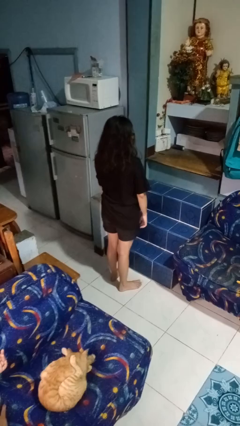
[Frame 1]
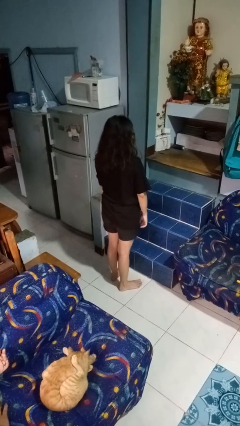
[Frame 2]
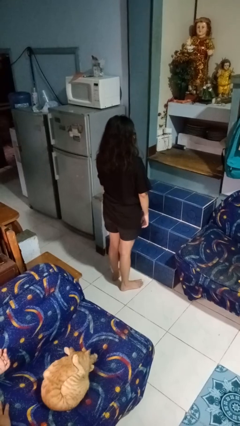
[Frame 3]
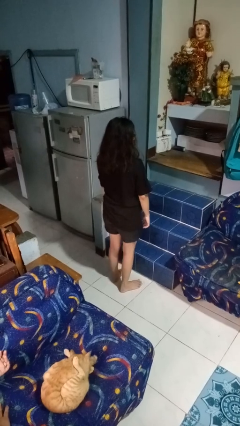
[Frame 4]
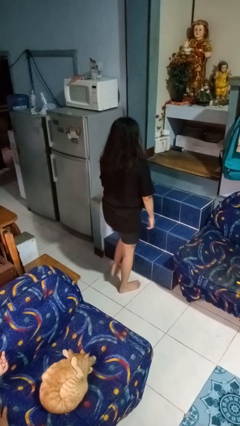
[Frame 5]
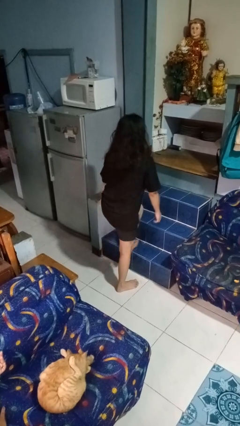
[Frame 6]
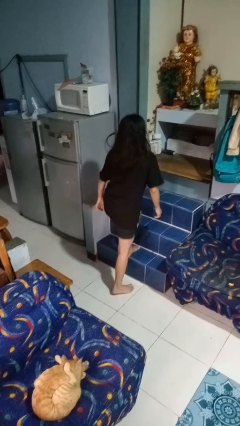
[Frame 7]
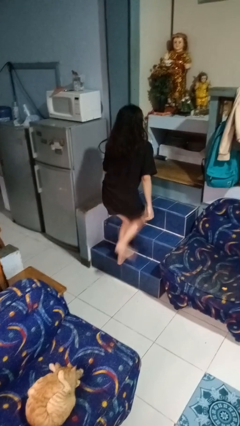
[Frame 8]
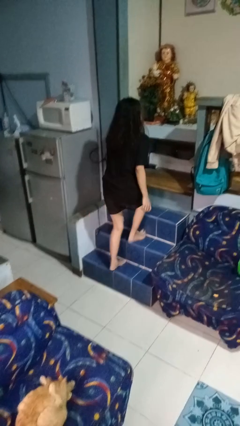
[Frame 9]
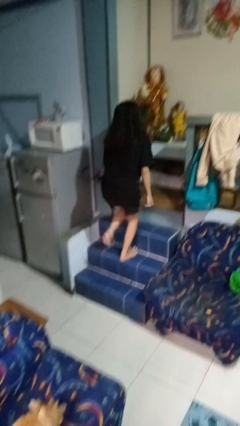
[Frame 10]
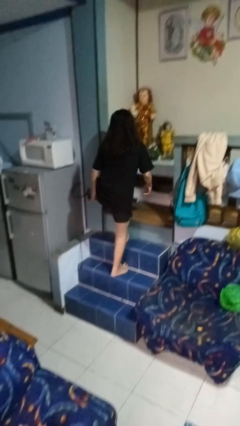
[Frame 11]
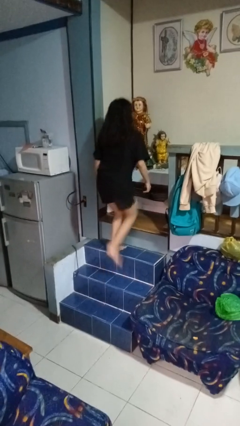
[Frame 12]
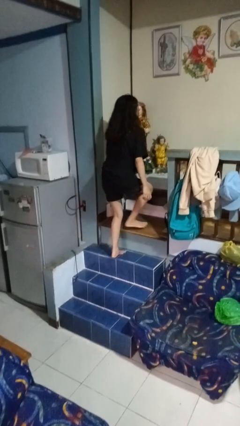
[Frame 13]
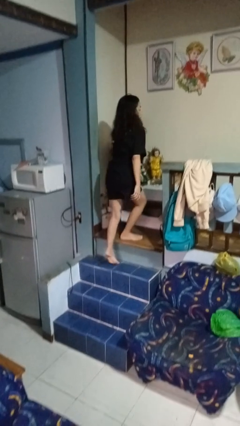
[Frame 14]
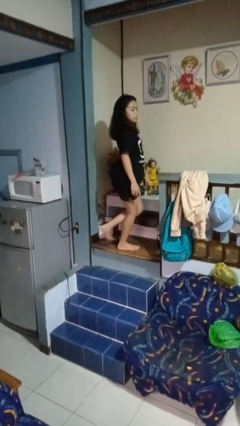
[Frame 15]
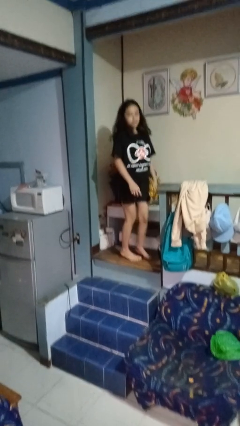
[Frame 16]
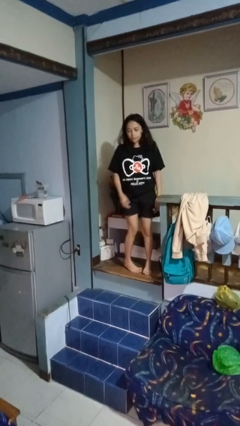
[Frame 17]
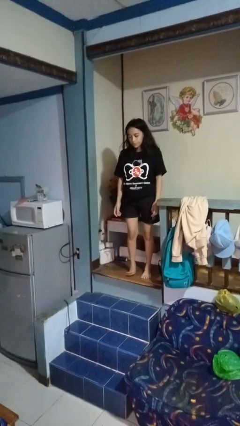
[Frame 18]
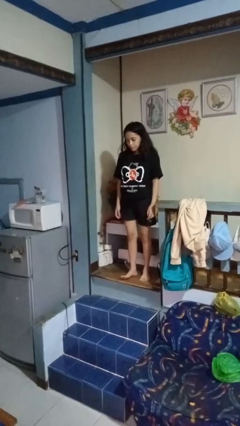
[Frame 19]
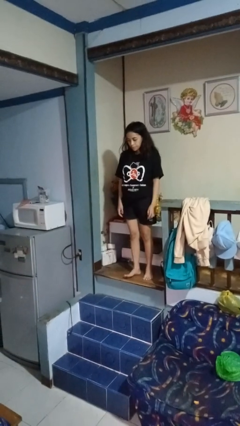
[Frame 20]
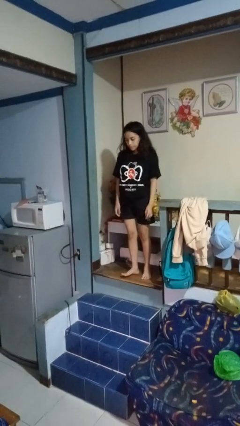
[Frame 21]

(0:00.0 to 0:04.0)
person climbs up stairs

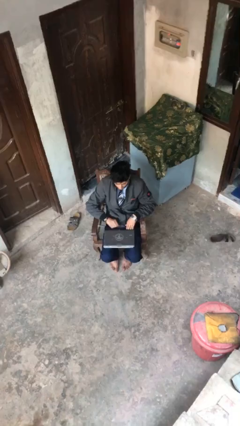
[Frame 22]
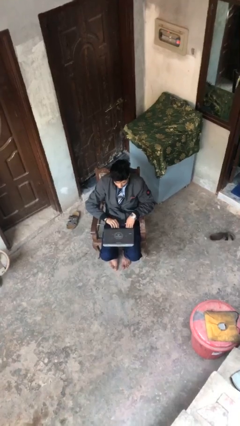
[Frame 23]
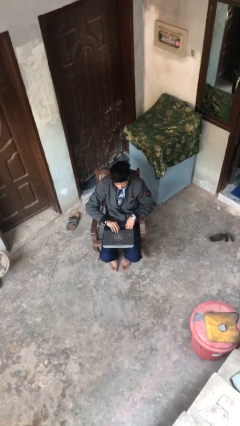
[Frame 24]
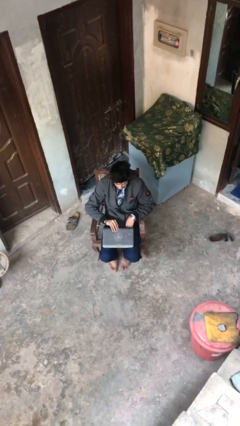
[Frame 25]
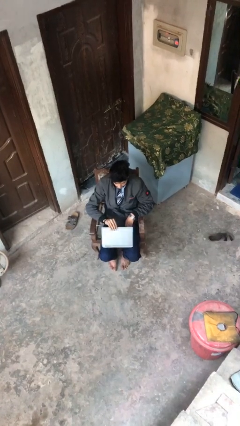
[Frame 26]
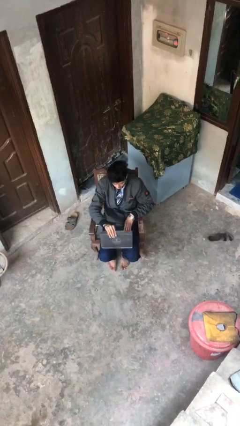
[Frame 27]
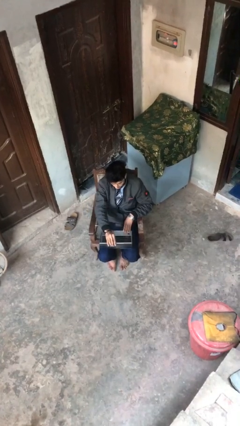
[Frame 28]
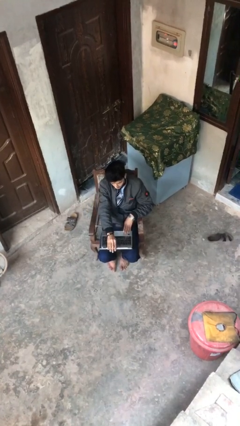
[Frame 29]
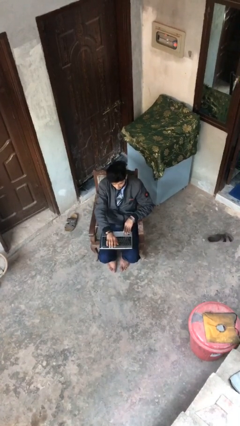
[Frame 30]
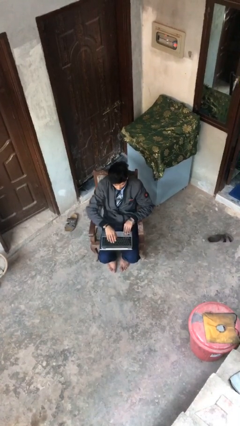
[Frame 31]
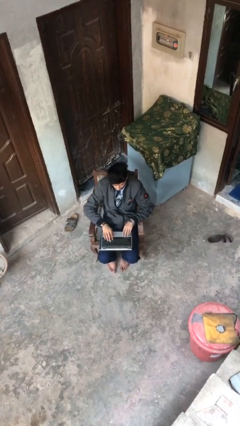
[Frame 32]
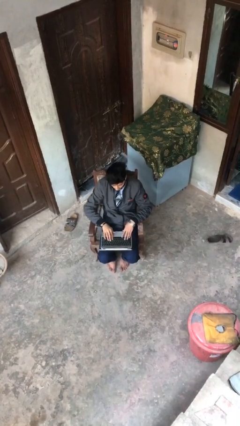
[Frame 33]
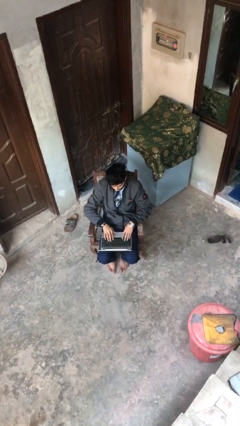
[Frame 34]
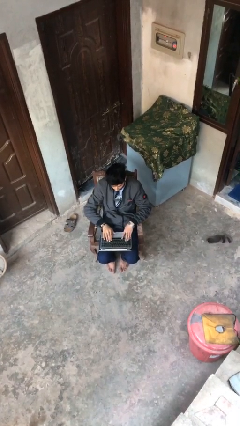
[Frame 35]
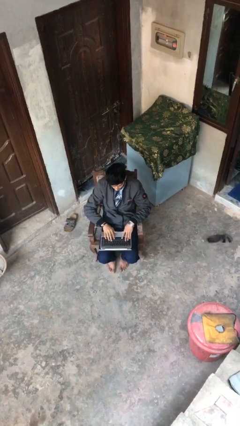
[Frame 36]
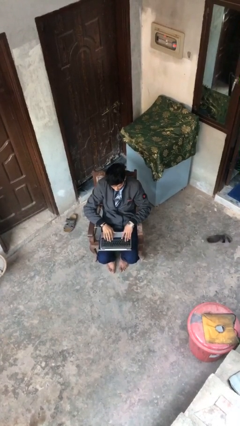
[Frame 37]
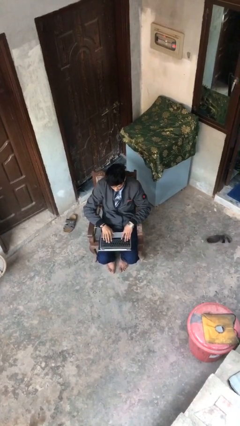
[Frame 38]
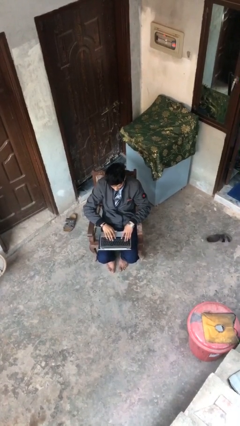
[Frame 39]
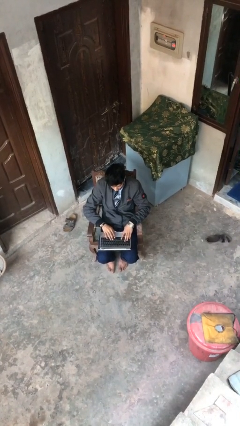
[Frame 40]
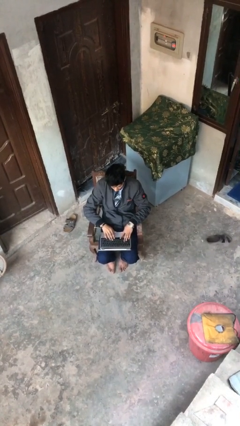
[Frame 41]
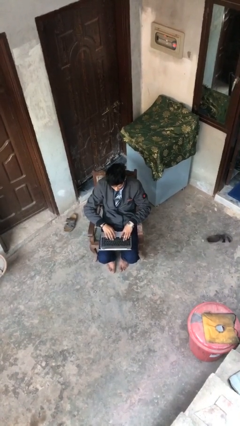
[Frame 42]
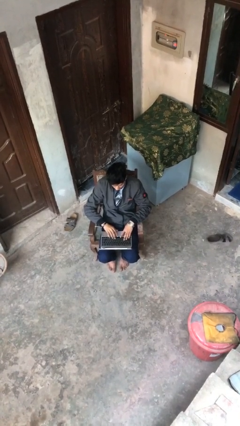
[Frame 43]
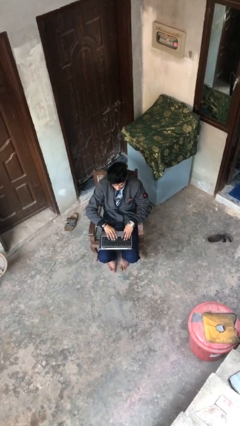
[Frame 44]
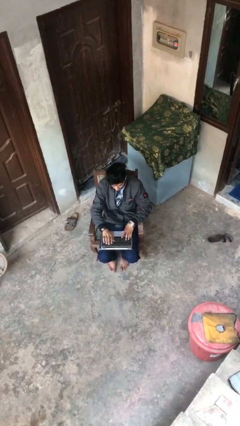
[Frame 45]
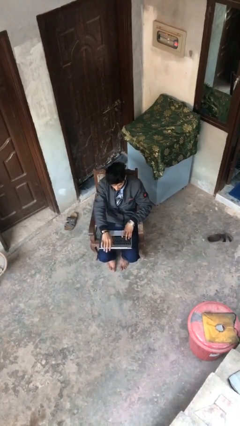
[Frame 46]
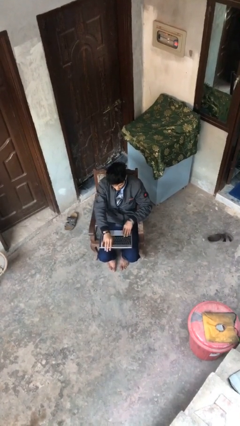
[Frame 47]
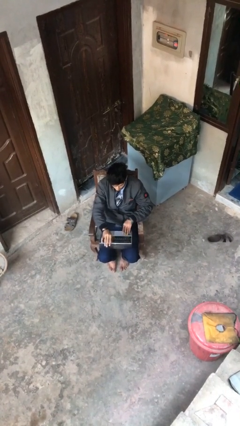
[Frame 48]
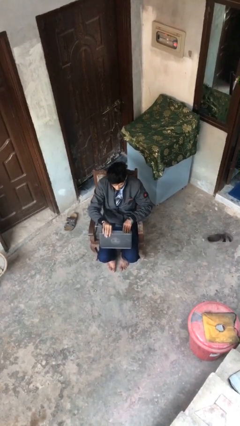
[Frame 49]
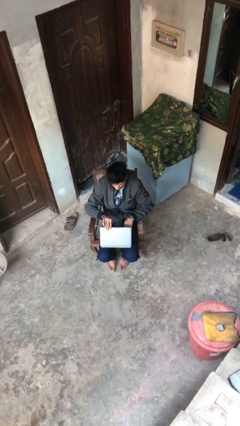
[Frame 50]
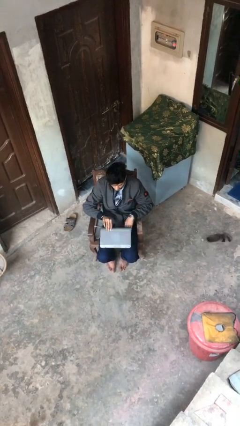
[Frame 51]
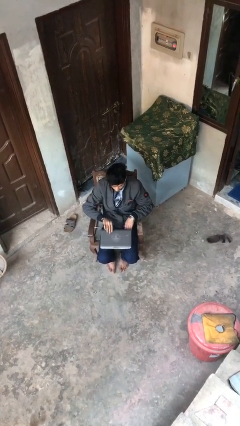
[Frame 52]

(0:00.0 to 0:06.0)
person interacts with laptop

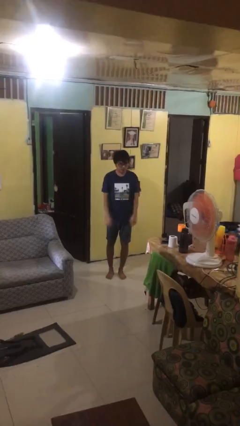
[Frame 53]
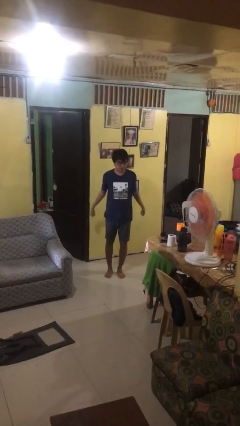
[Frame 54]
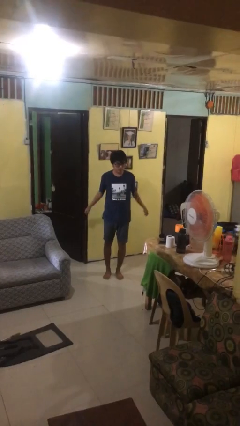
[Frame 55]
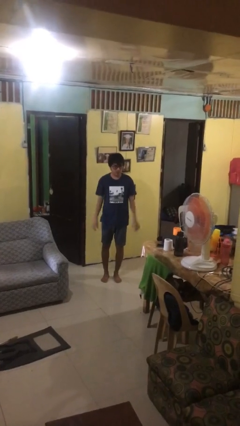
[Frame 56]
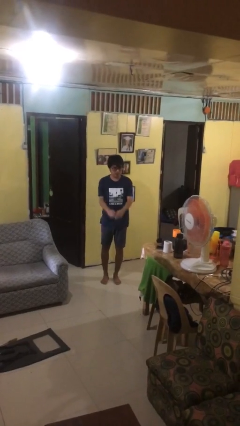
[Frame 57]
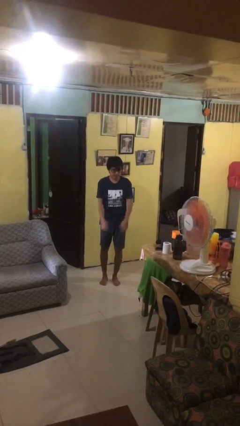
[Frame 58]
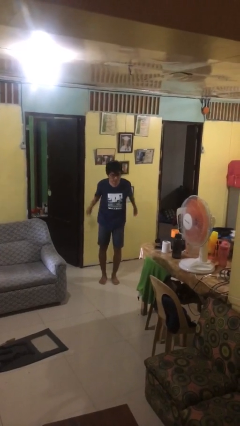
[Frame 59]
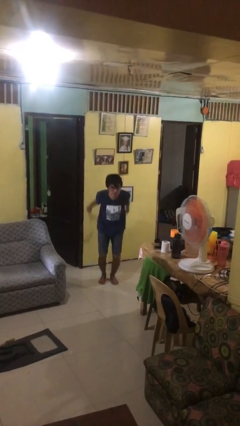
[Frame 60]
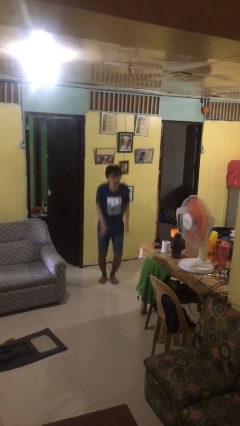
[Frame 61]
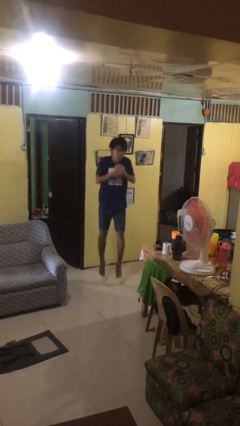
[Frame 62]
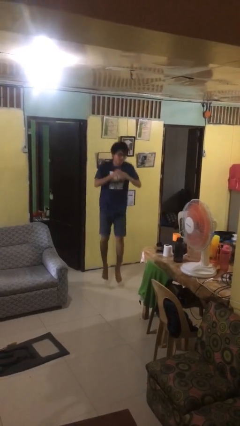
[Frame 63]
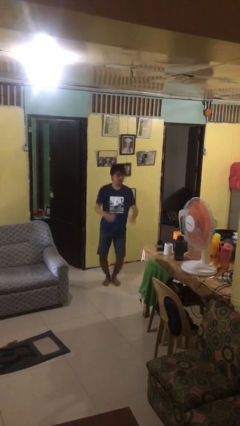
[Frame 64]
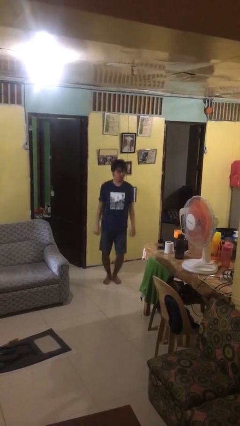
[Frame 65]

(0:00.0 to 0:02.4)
person jumps

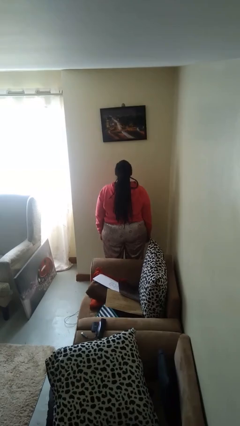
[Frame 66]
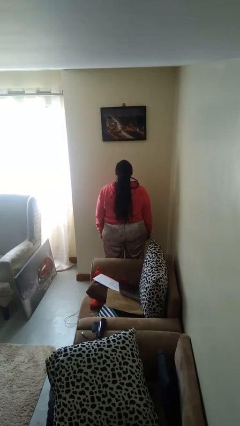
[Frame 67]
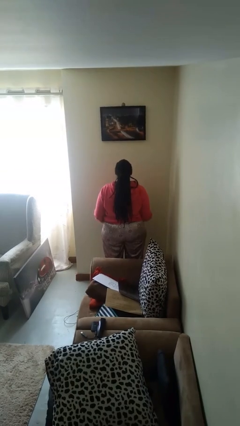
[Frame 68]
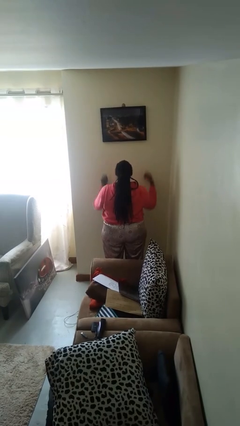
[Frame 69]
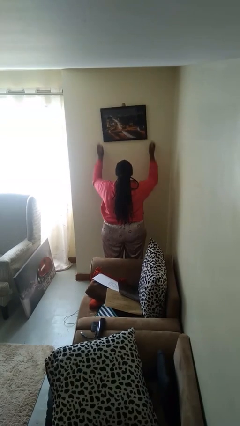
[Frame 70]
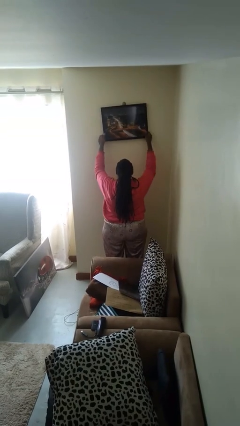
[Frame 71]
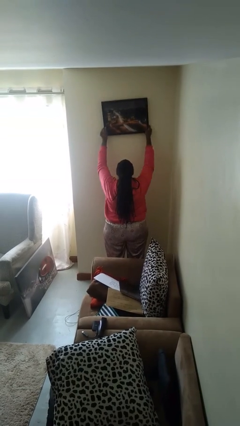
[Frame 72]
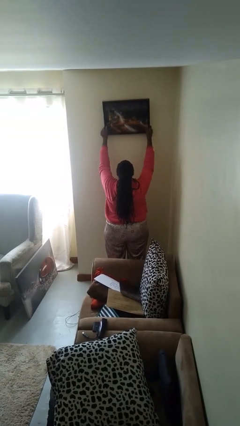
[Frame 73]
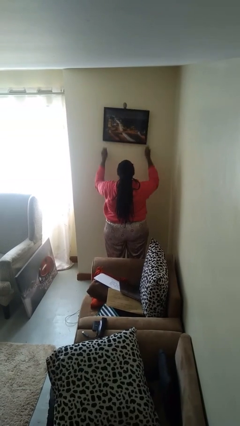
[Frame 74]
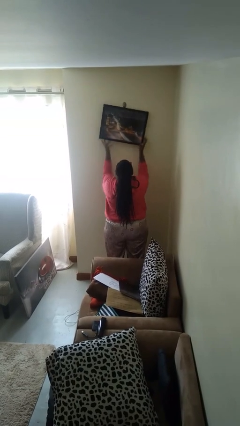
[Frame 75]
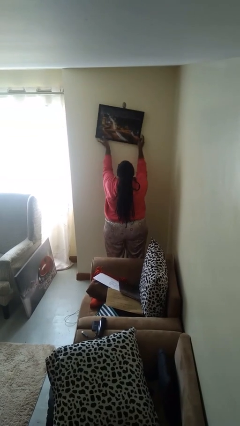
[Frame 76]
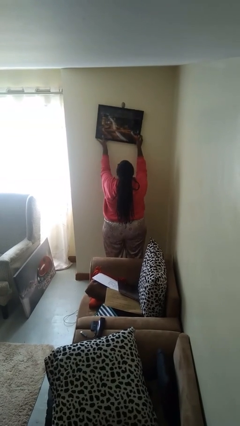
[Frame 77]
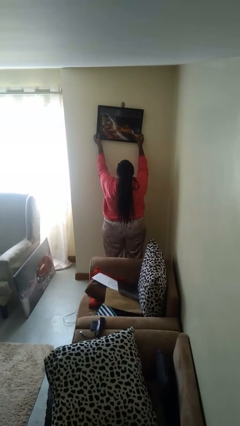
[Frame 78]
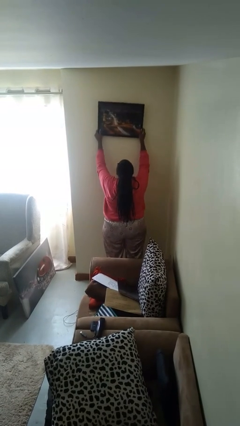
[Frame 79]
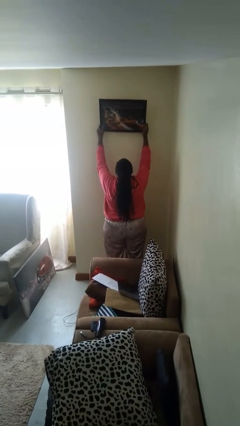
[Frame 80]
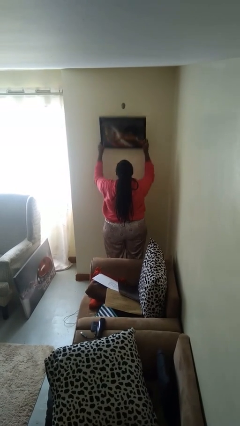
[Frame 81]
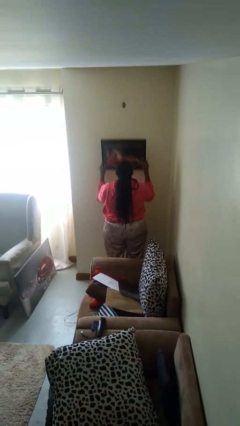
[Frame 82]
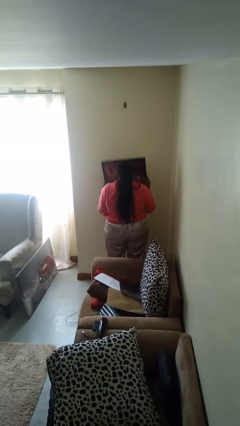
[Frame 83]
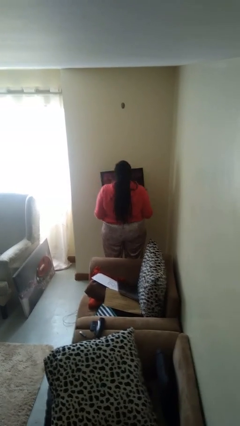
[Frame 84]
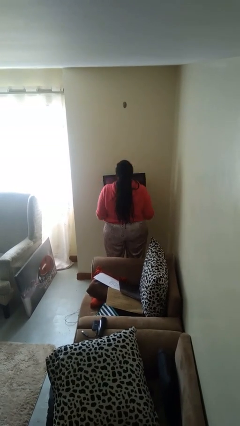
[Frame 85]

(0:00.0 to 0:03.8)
person takes down picture frame

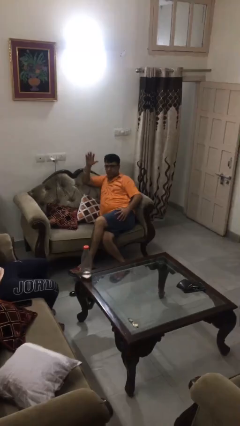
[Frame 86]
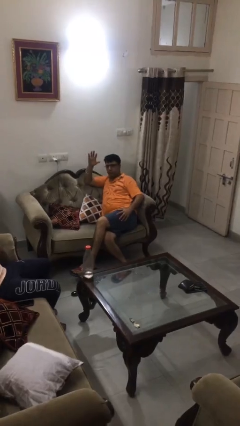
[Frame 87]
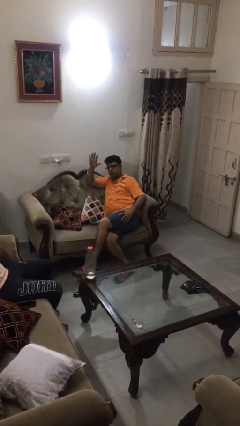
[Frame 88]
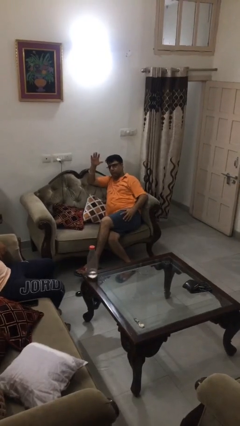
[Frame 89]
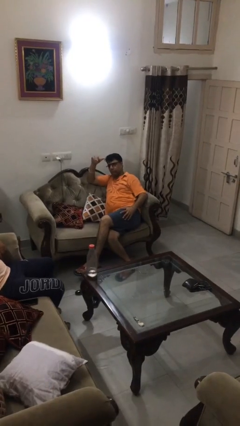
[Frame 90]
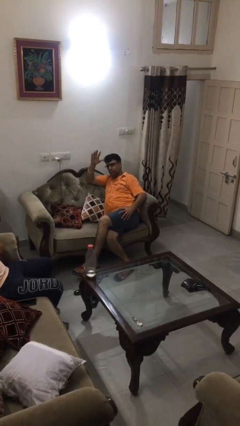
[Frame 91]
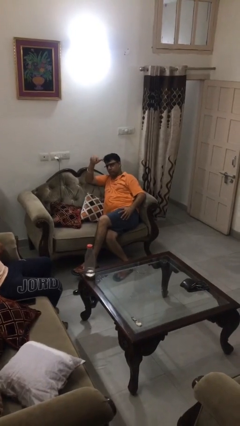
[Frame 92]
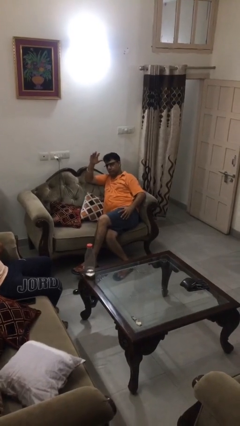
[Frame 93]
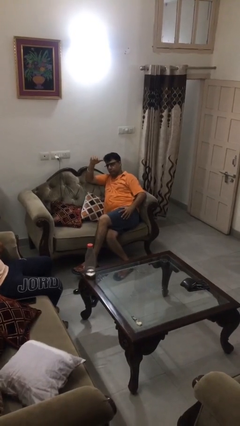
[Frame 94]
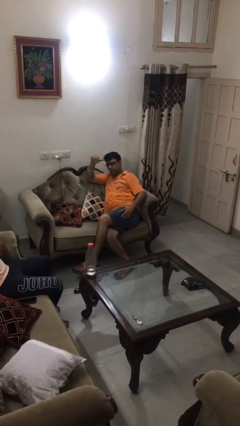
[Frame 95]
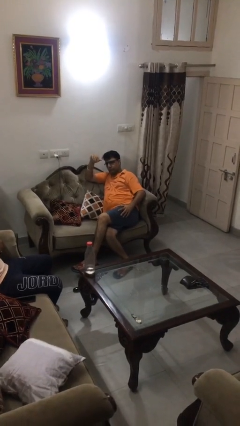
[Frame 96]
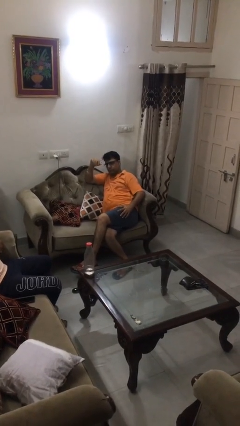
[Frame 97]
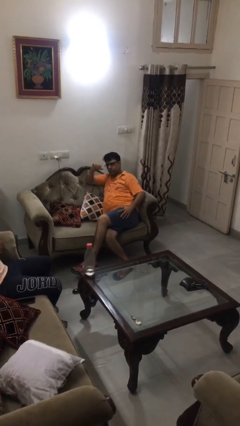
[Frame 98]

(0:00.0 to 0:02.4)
person gestures come here
